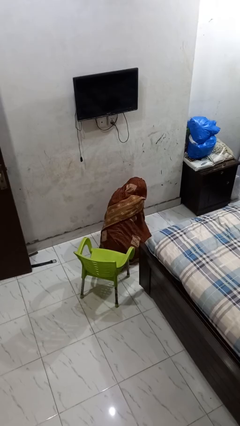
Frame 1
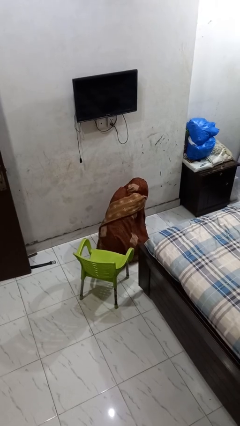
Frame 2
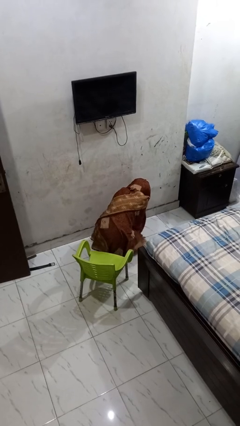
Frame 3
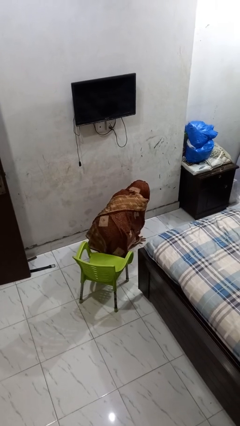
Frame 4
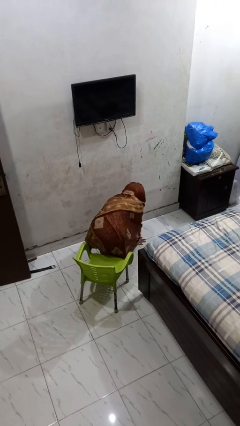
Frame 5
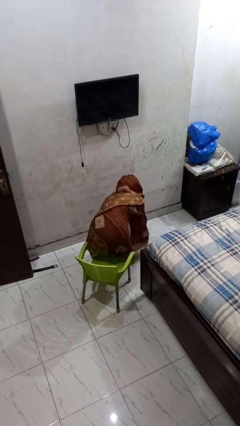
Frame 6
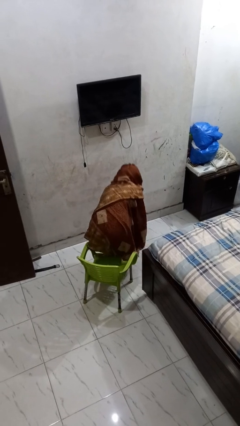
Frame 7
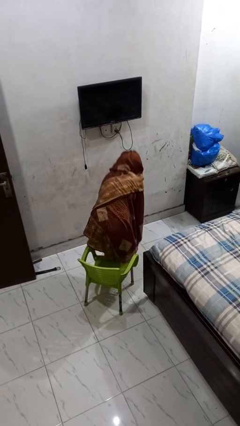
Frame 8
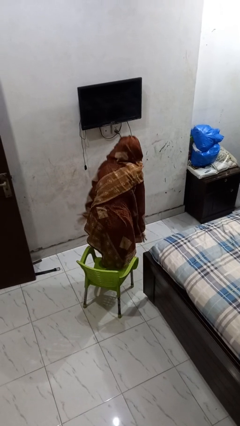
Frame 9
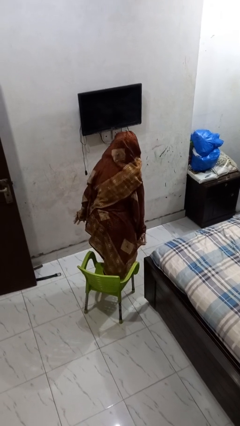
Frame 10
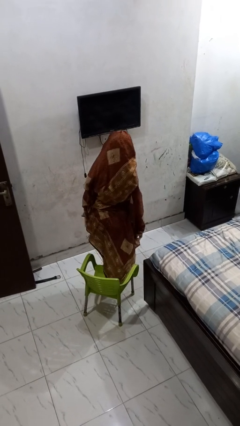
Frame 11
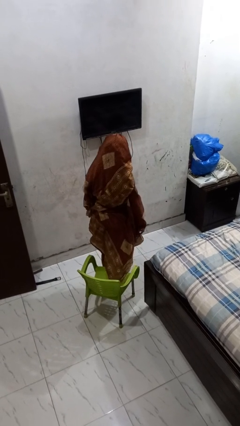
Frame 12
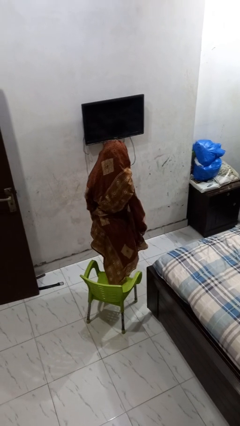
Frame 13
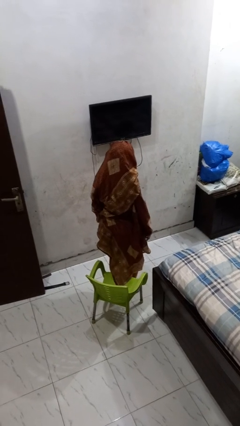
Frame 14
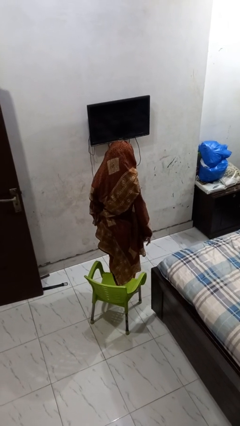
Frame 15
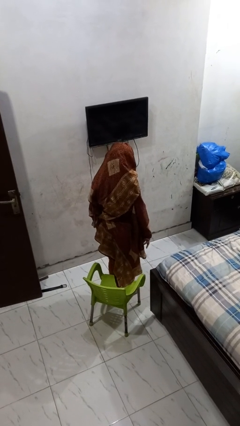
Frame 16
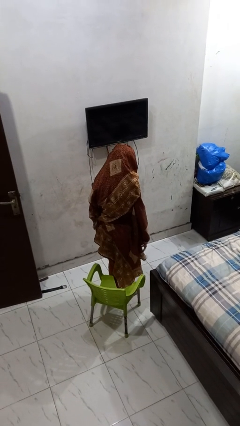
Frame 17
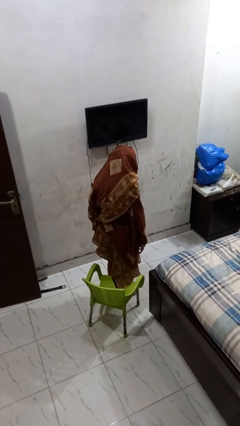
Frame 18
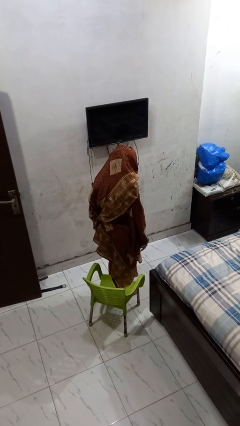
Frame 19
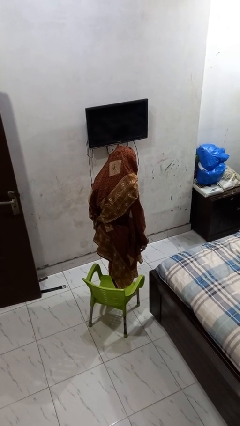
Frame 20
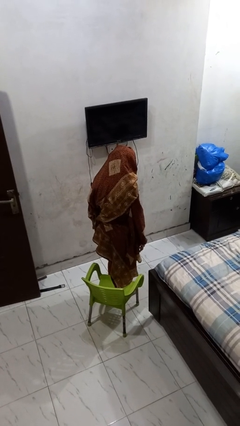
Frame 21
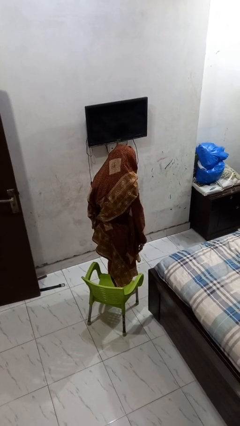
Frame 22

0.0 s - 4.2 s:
person stands up from floor

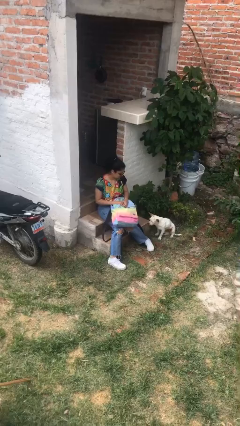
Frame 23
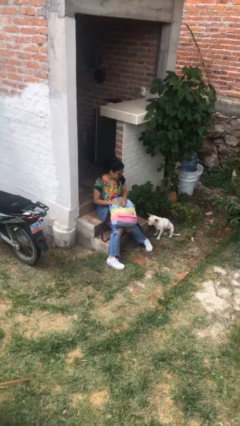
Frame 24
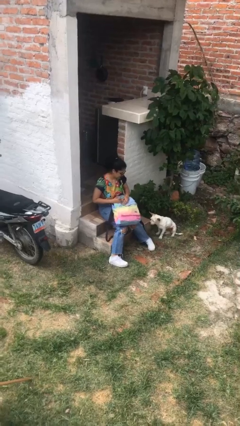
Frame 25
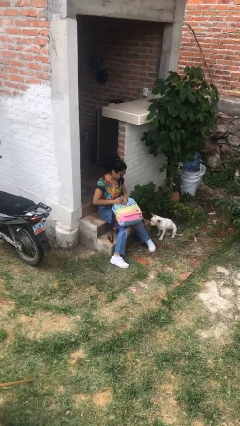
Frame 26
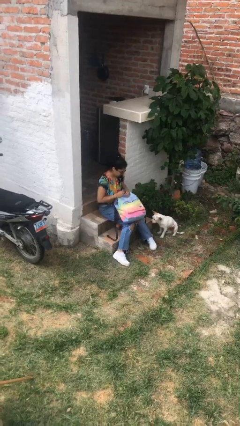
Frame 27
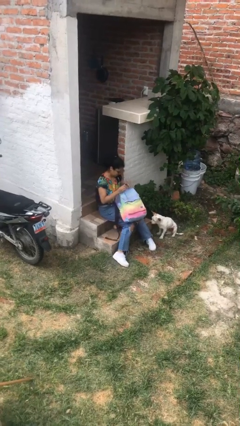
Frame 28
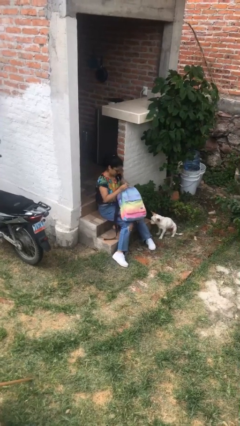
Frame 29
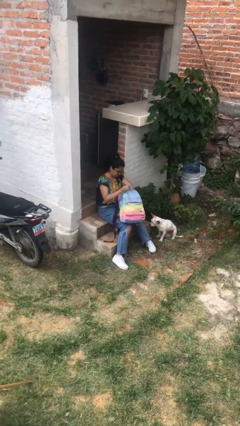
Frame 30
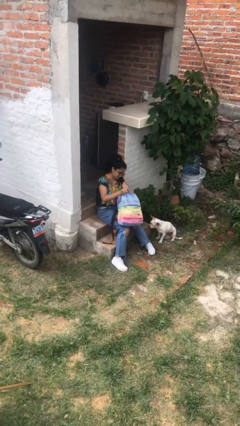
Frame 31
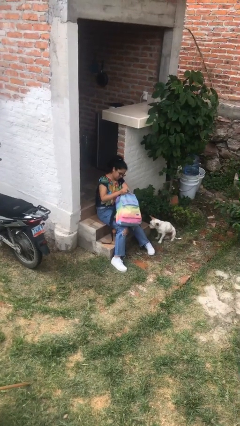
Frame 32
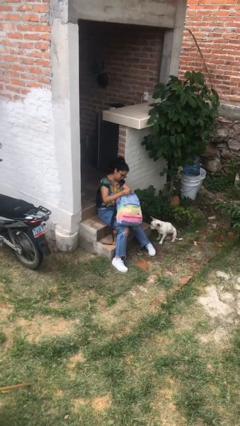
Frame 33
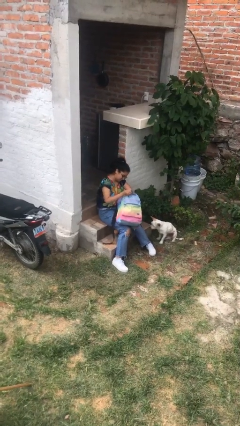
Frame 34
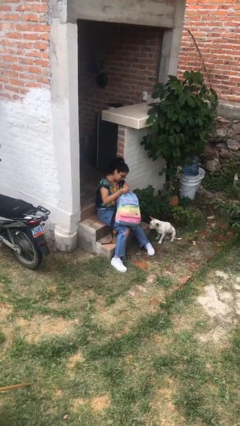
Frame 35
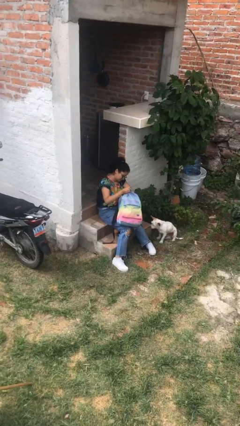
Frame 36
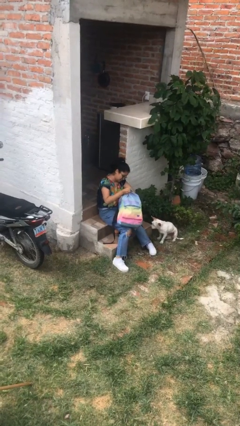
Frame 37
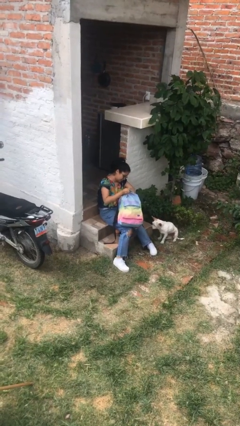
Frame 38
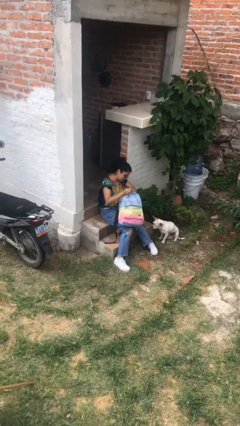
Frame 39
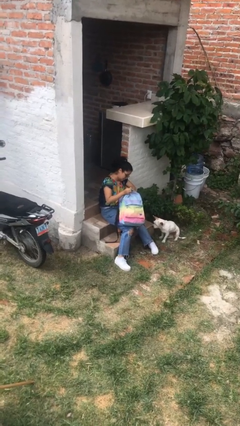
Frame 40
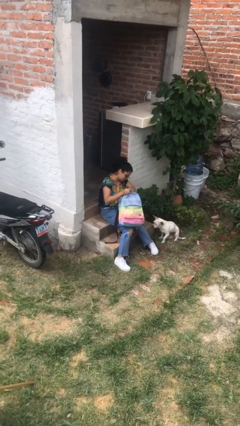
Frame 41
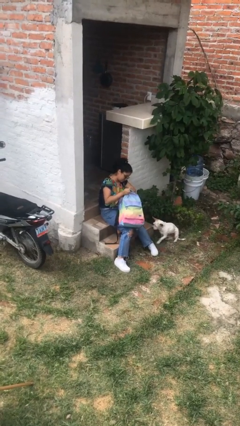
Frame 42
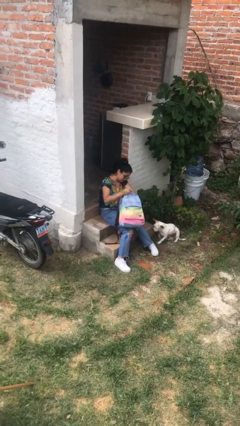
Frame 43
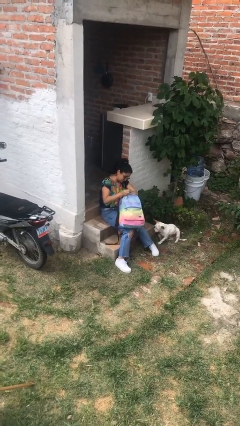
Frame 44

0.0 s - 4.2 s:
person searches in backpack

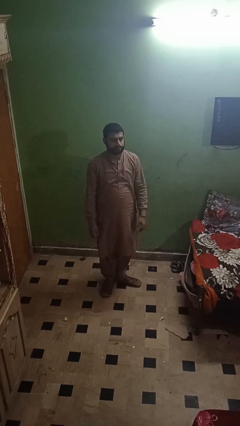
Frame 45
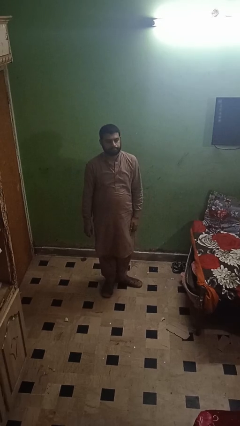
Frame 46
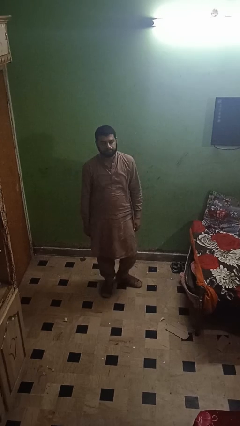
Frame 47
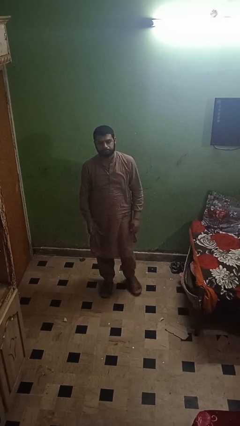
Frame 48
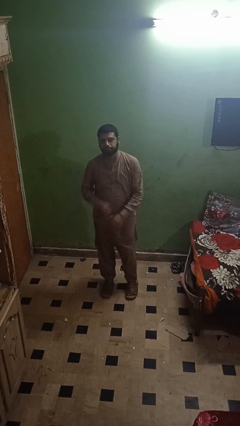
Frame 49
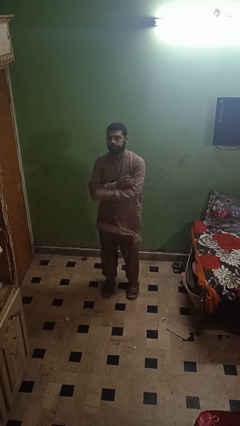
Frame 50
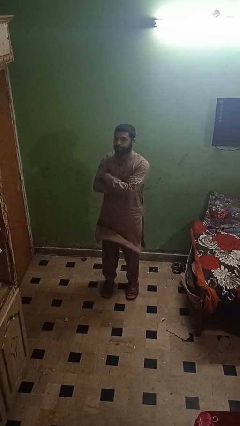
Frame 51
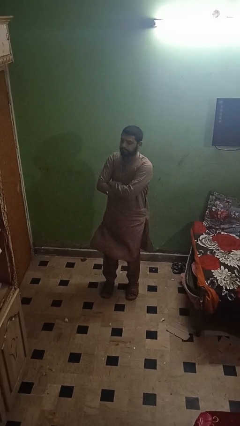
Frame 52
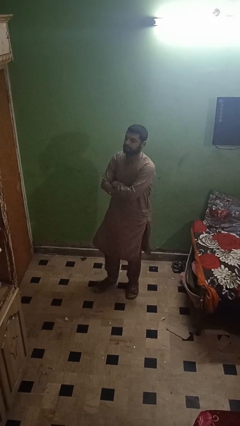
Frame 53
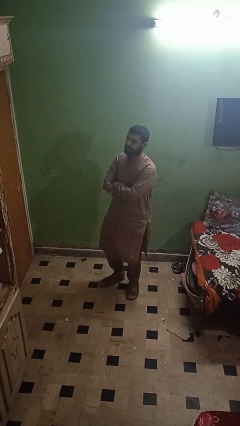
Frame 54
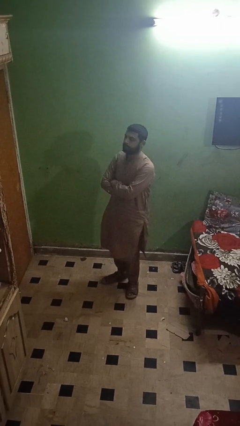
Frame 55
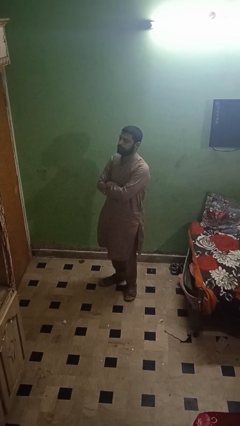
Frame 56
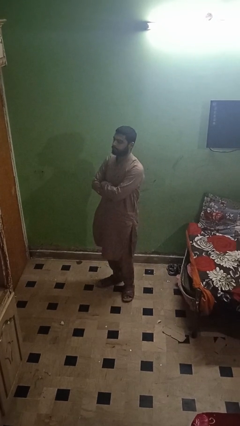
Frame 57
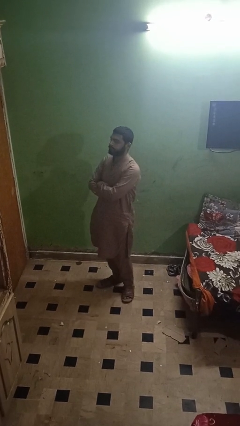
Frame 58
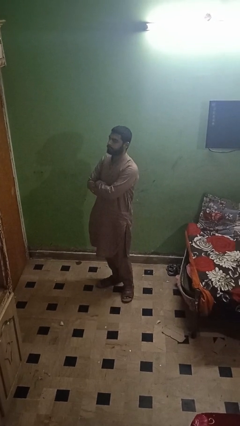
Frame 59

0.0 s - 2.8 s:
person crosses arms

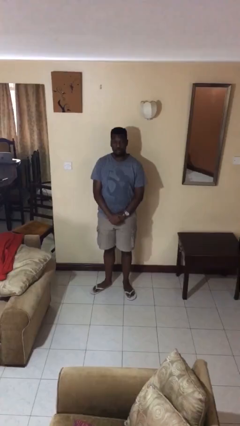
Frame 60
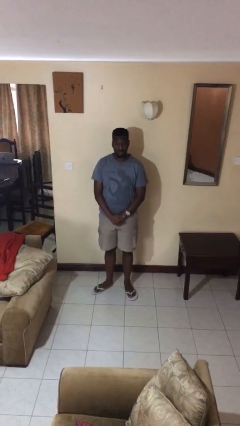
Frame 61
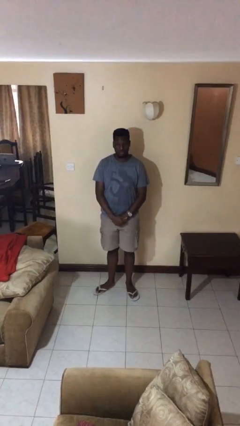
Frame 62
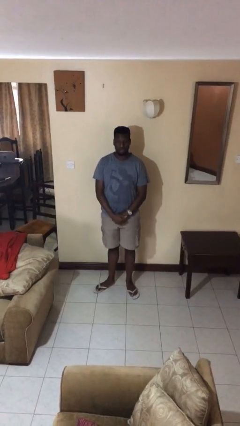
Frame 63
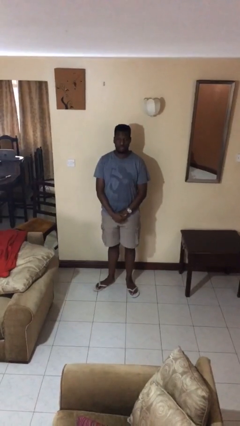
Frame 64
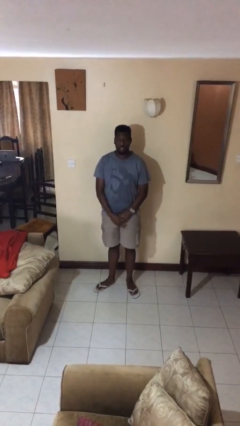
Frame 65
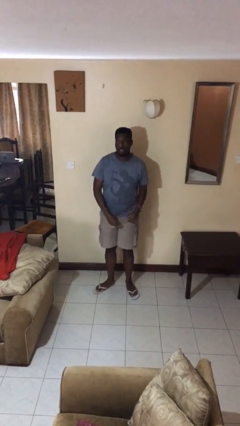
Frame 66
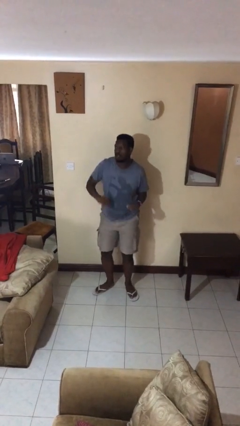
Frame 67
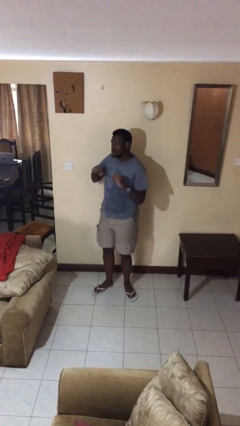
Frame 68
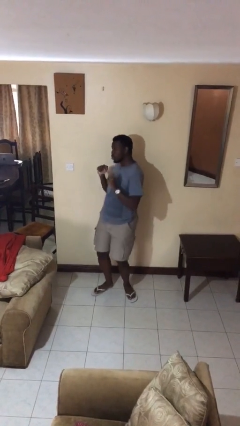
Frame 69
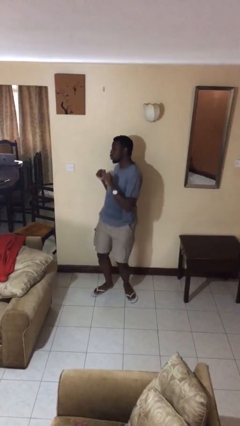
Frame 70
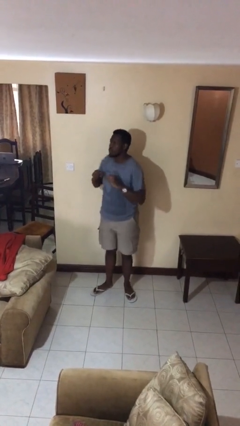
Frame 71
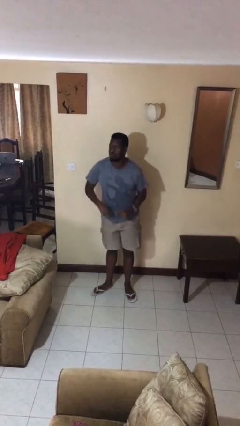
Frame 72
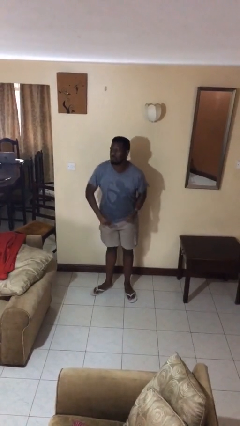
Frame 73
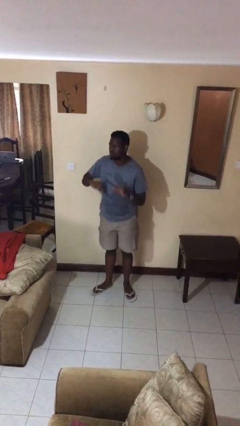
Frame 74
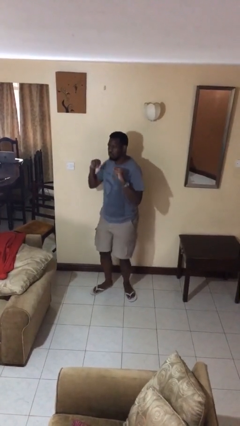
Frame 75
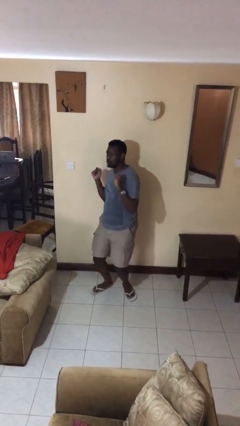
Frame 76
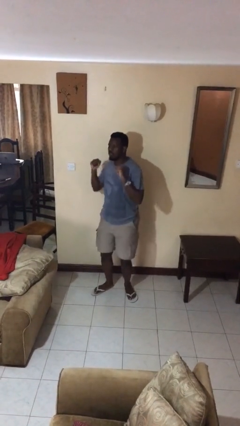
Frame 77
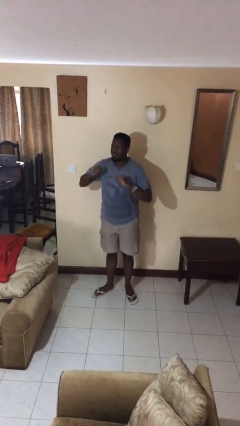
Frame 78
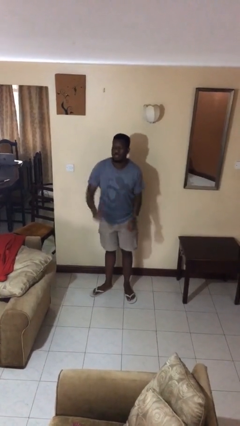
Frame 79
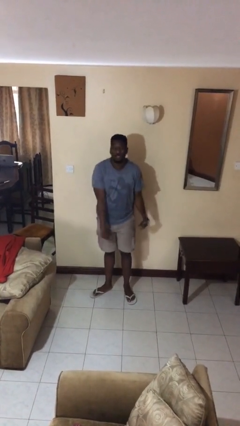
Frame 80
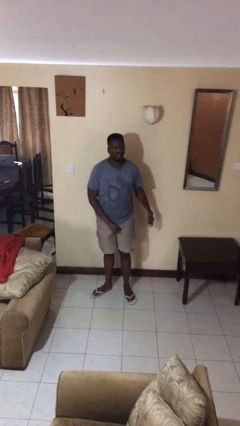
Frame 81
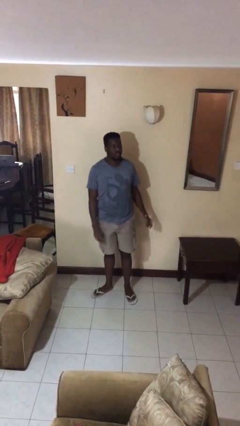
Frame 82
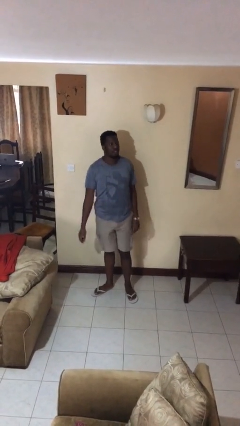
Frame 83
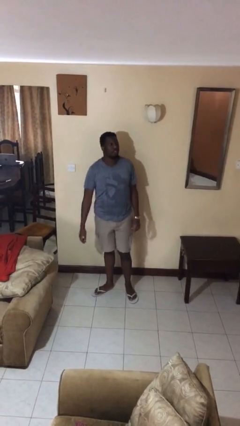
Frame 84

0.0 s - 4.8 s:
person dances in place

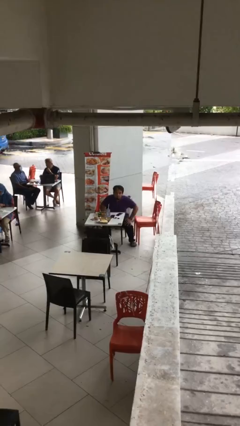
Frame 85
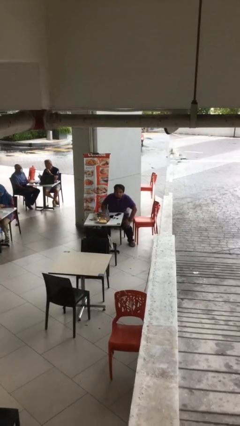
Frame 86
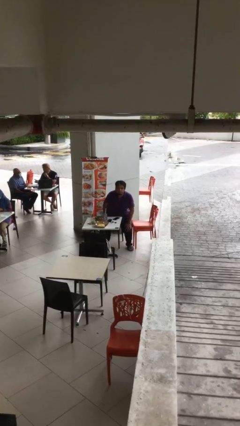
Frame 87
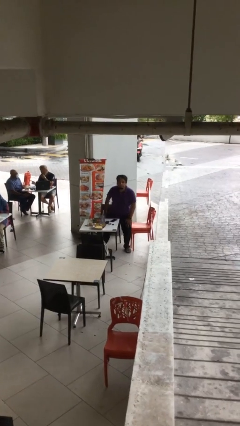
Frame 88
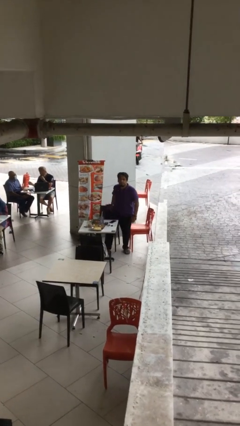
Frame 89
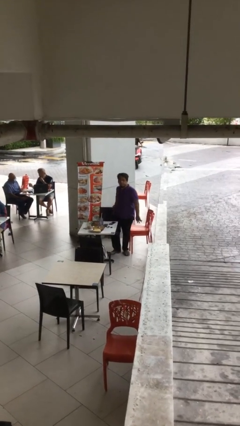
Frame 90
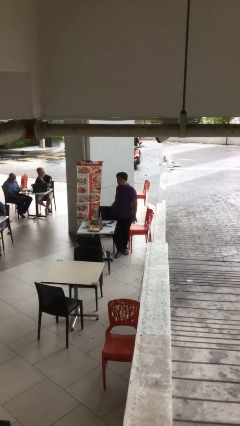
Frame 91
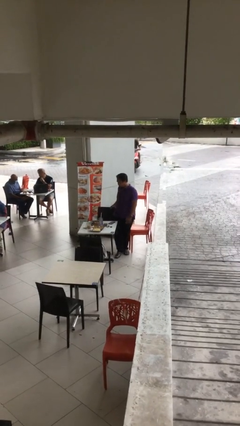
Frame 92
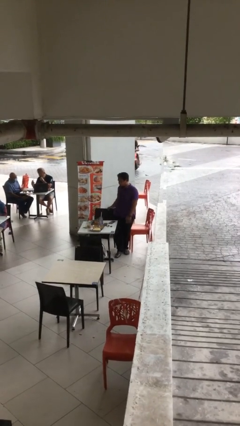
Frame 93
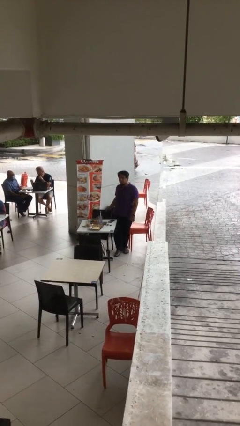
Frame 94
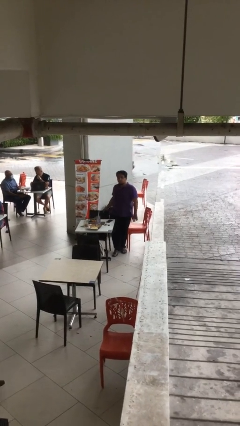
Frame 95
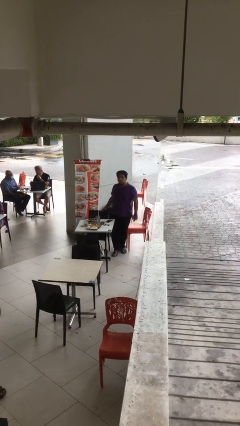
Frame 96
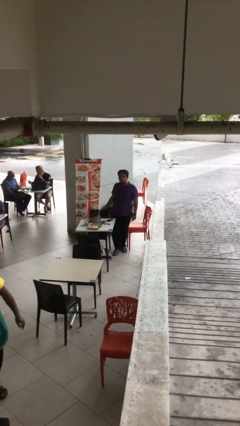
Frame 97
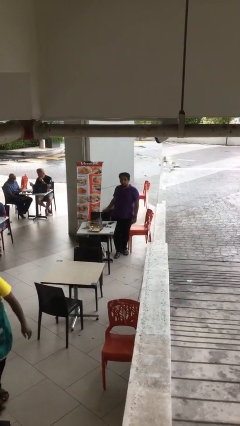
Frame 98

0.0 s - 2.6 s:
person stands up
